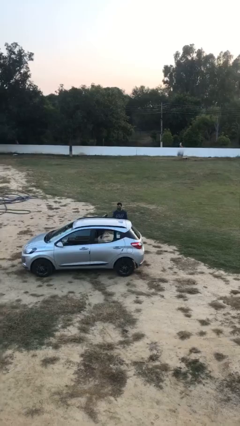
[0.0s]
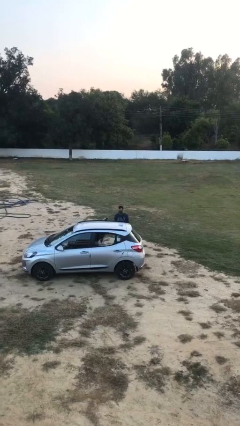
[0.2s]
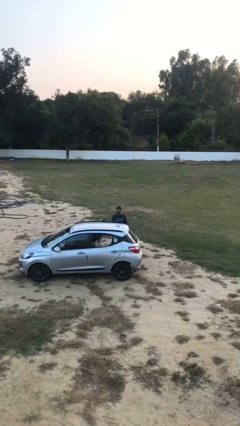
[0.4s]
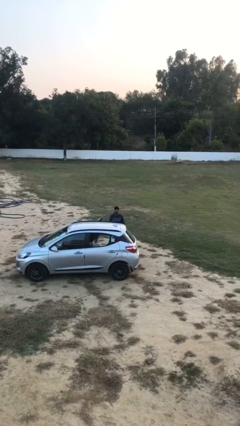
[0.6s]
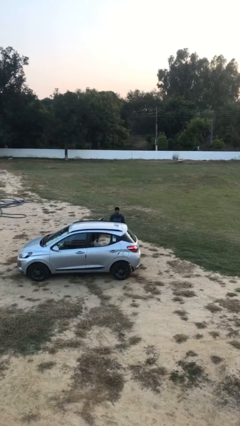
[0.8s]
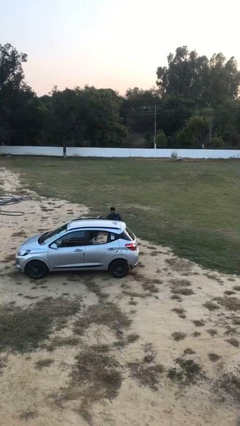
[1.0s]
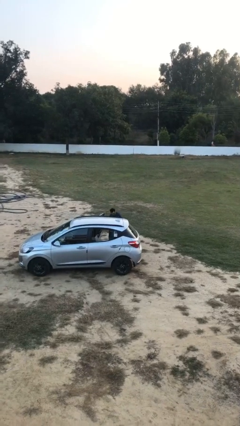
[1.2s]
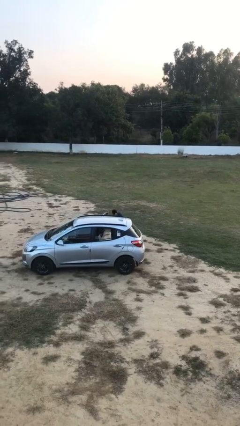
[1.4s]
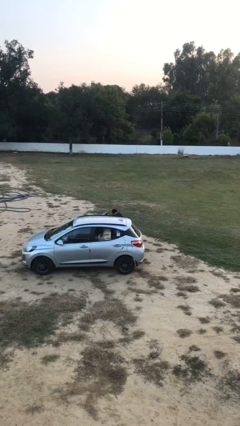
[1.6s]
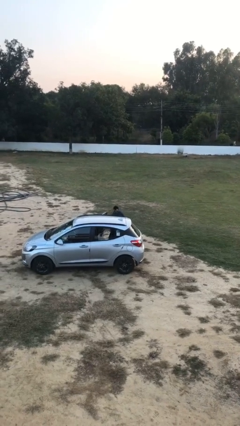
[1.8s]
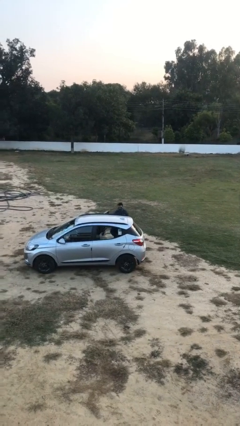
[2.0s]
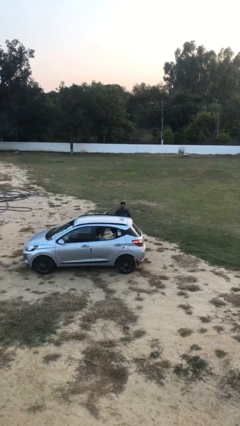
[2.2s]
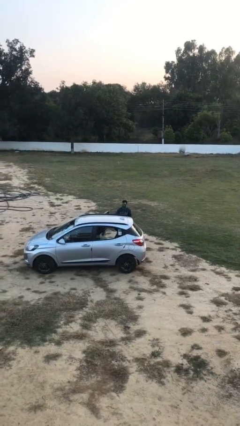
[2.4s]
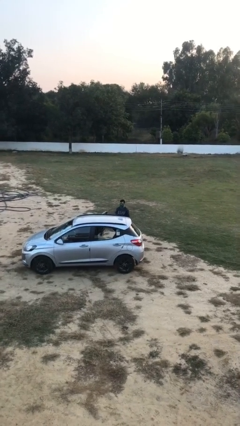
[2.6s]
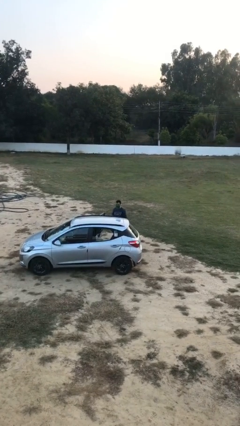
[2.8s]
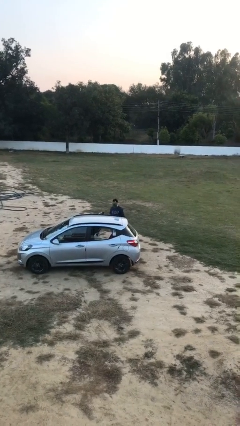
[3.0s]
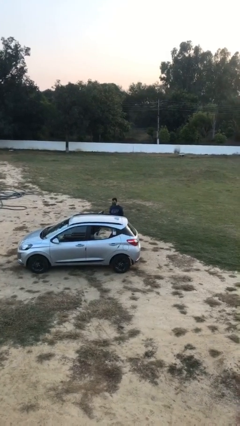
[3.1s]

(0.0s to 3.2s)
person unloads car

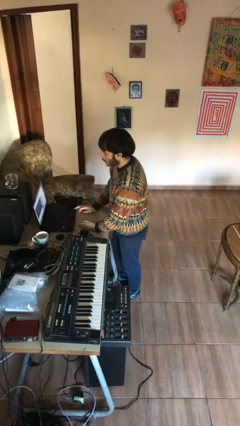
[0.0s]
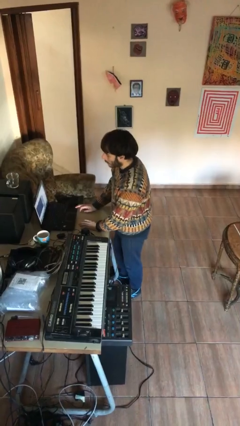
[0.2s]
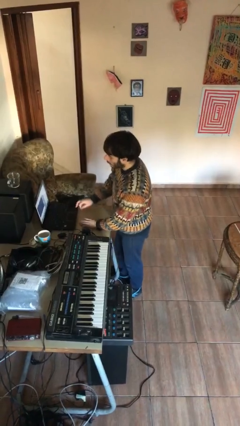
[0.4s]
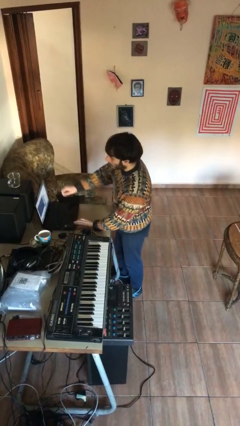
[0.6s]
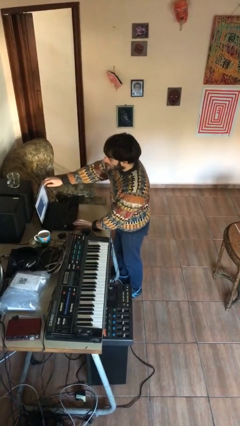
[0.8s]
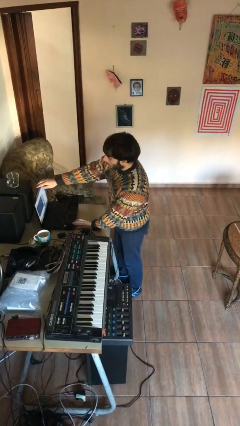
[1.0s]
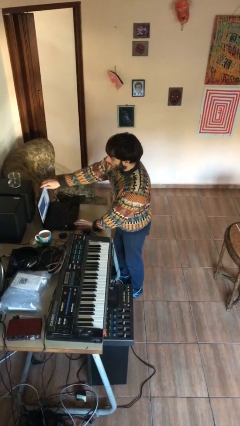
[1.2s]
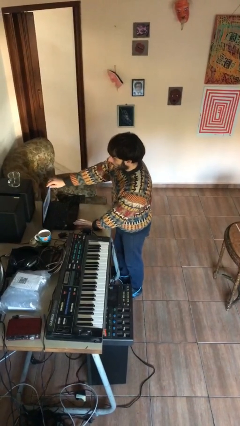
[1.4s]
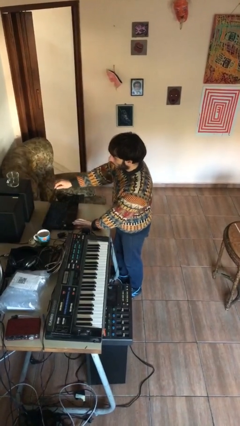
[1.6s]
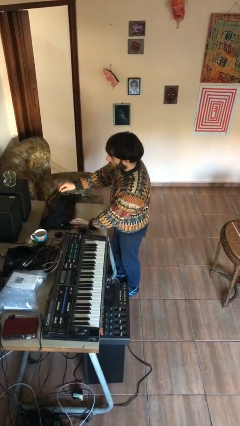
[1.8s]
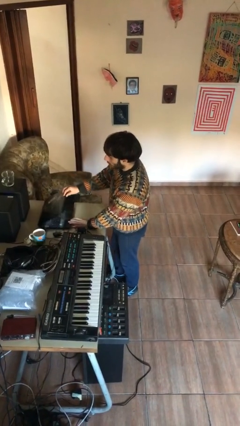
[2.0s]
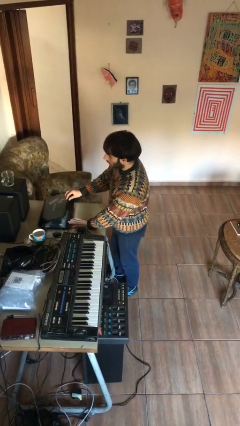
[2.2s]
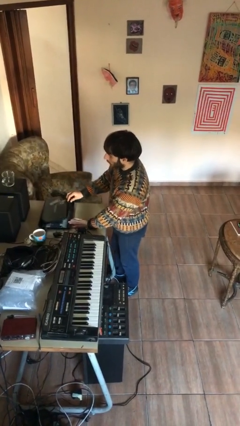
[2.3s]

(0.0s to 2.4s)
person closes laptop

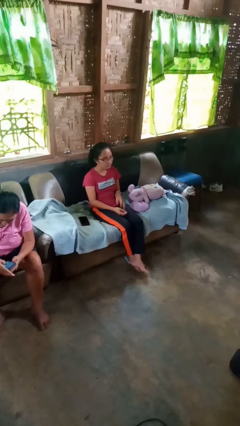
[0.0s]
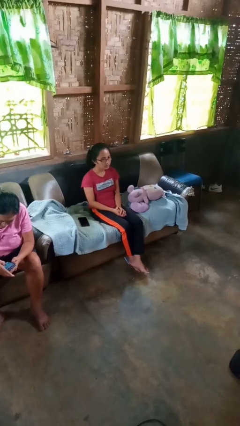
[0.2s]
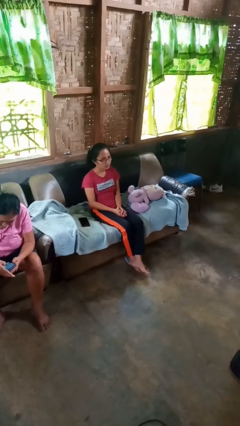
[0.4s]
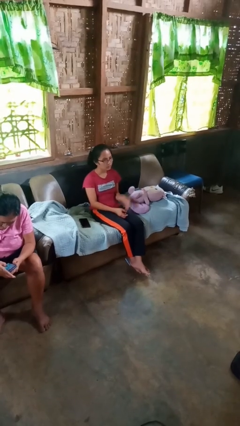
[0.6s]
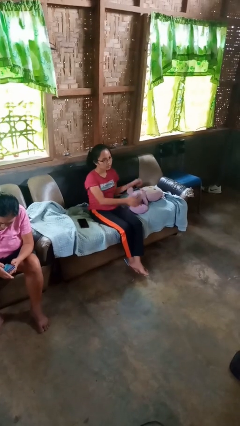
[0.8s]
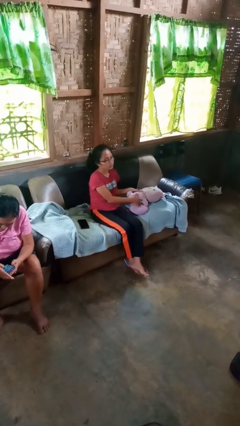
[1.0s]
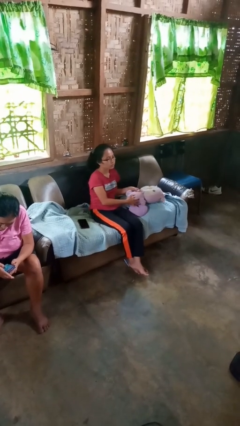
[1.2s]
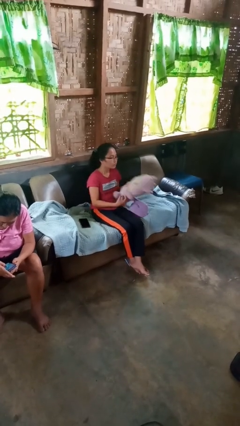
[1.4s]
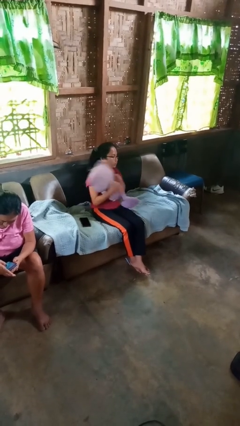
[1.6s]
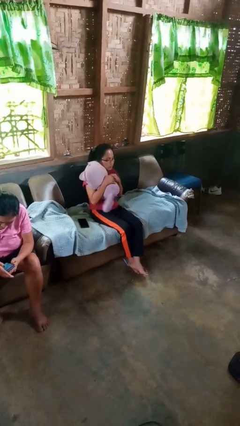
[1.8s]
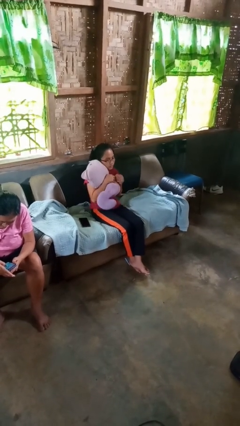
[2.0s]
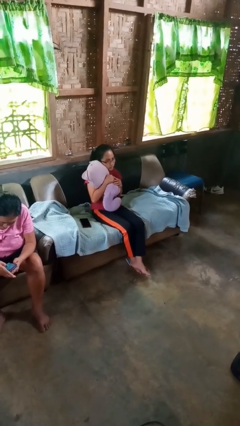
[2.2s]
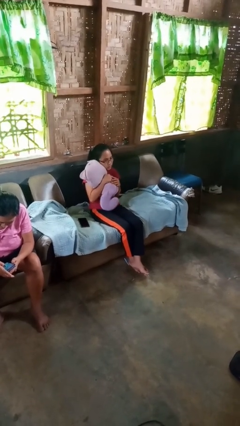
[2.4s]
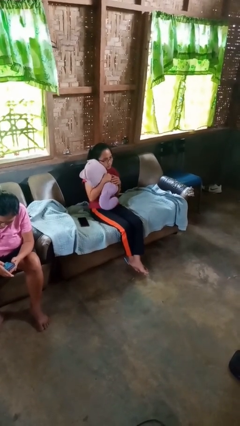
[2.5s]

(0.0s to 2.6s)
person hugs stuffed animal

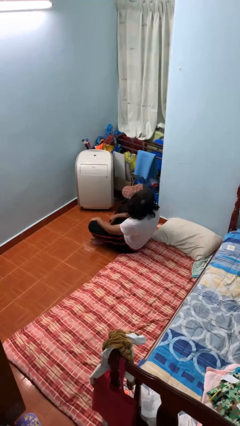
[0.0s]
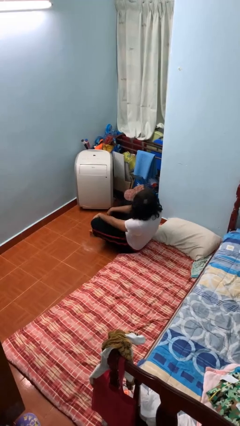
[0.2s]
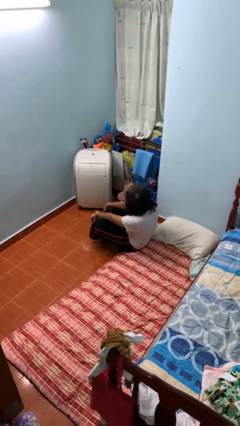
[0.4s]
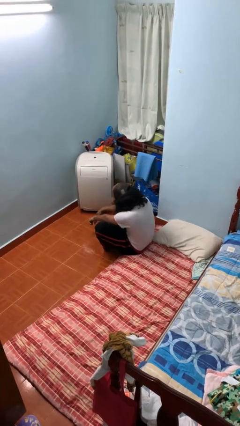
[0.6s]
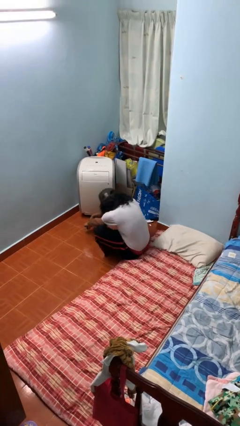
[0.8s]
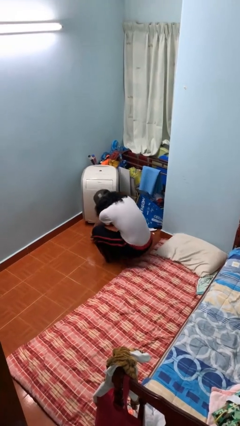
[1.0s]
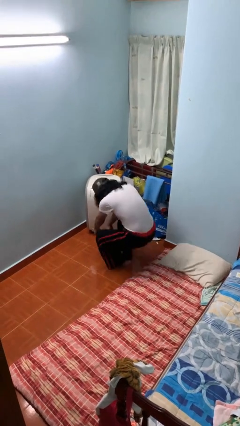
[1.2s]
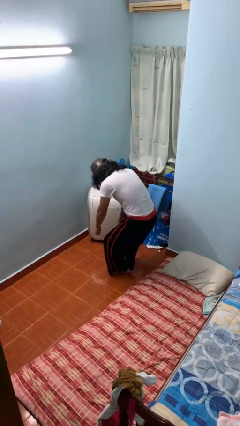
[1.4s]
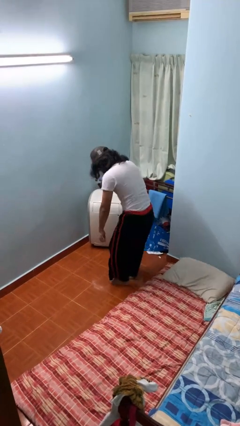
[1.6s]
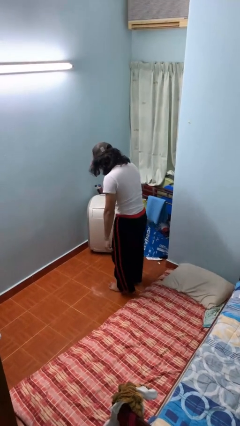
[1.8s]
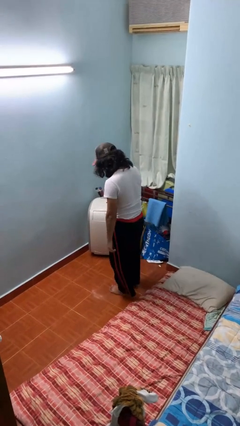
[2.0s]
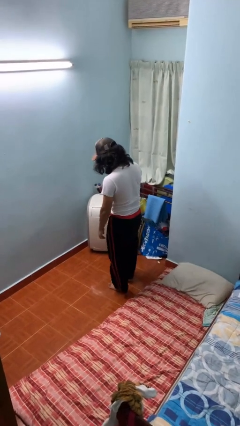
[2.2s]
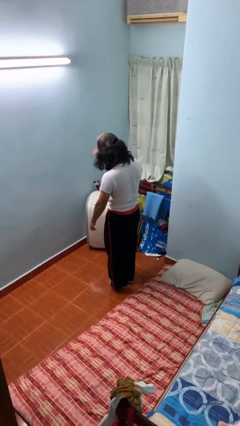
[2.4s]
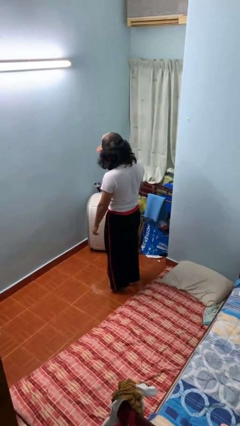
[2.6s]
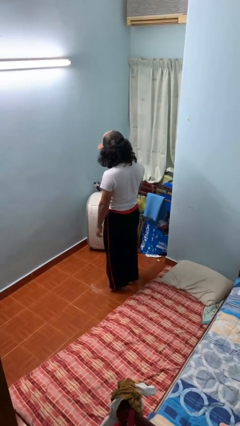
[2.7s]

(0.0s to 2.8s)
person stands up from floor

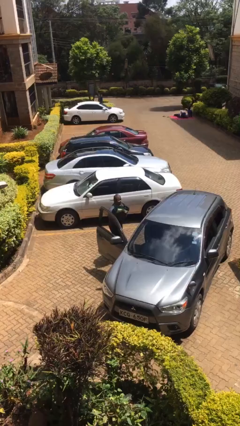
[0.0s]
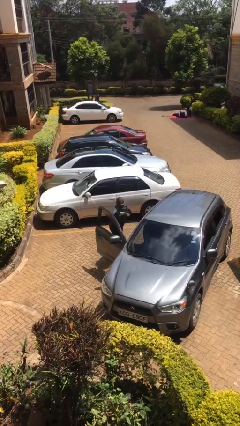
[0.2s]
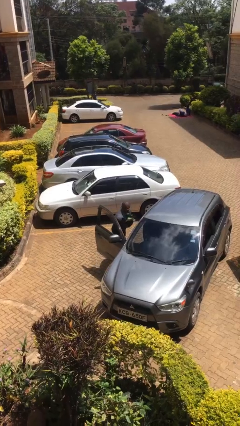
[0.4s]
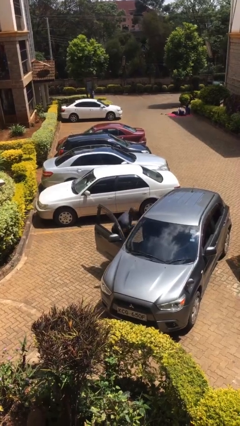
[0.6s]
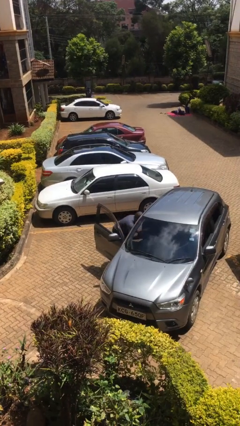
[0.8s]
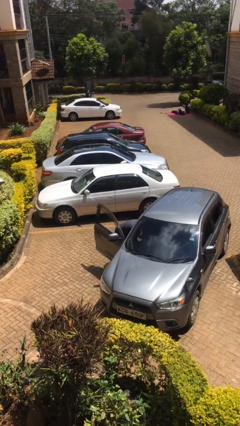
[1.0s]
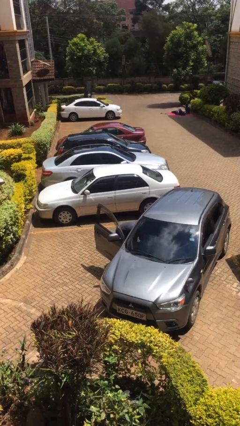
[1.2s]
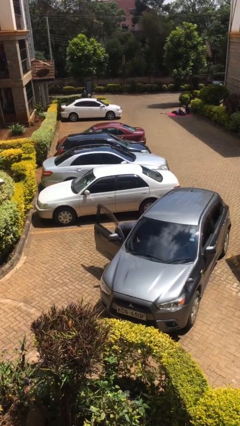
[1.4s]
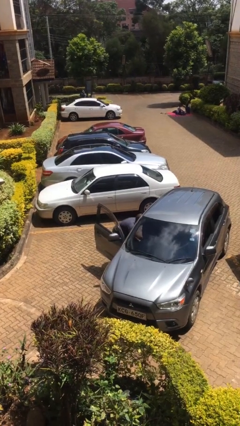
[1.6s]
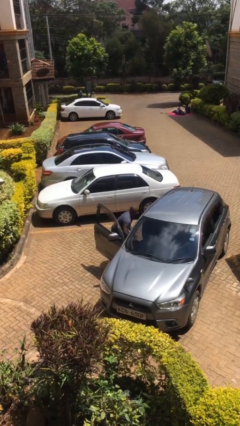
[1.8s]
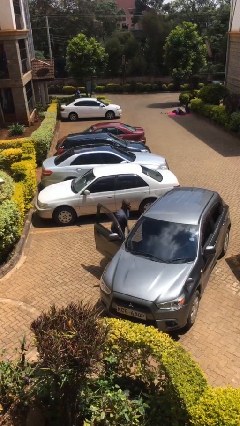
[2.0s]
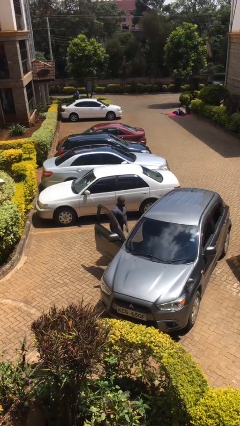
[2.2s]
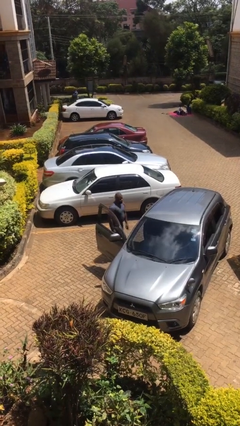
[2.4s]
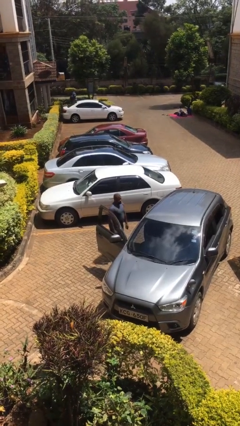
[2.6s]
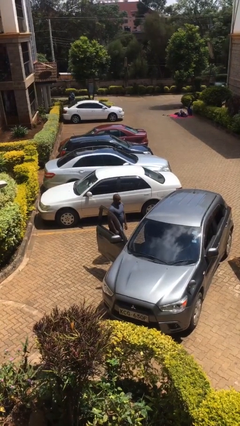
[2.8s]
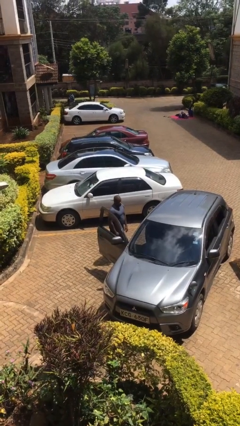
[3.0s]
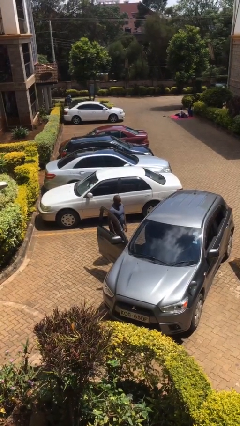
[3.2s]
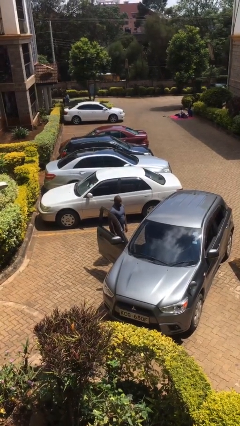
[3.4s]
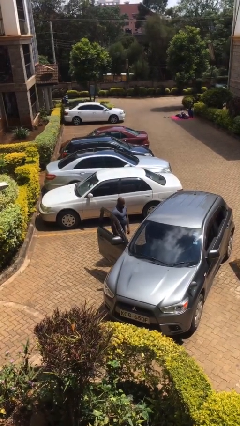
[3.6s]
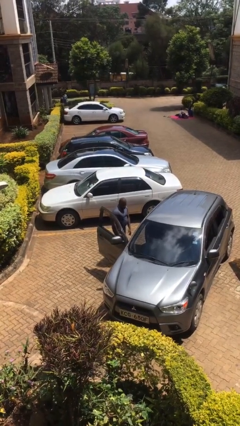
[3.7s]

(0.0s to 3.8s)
person loads car

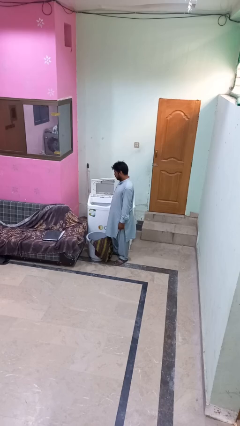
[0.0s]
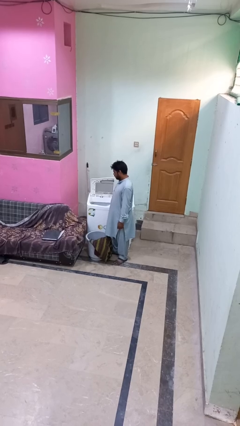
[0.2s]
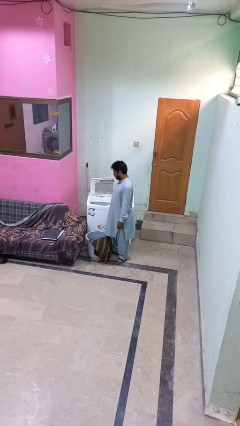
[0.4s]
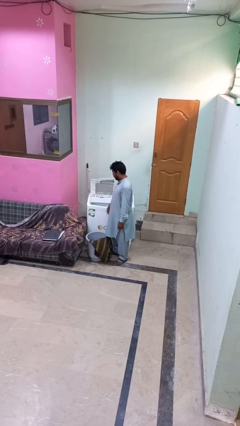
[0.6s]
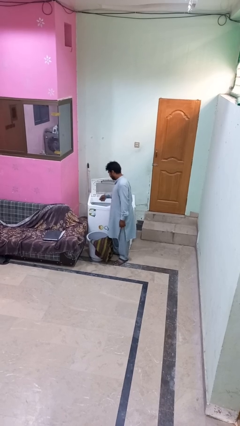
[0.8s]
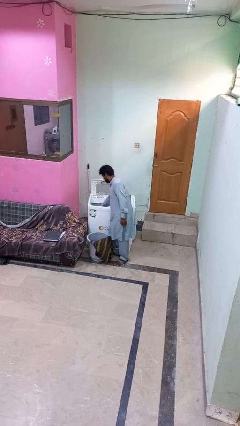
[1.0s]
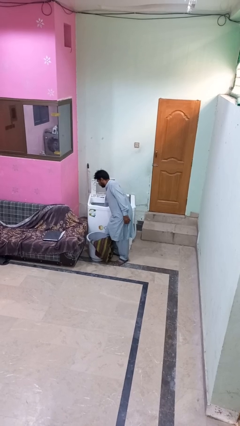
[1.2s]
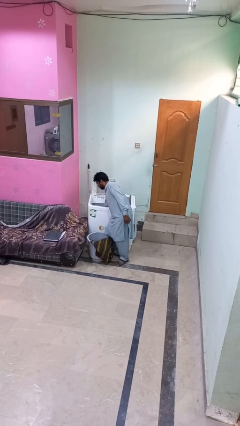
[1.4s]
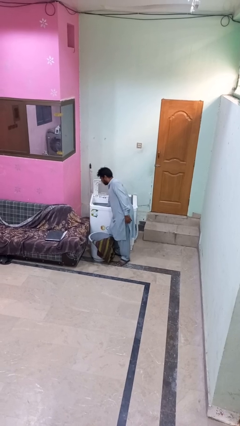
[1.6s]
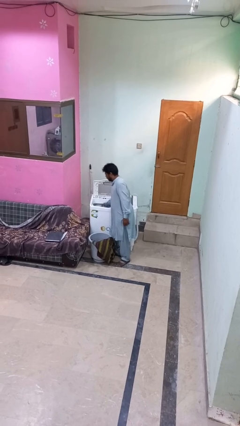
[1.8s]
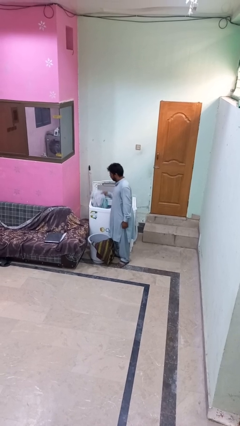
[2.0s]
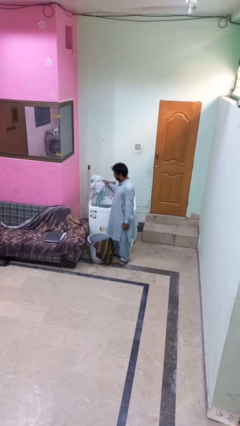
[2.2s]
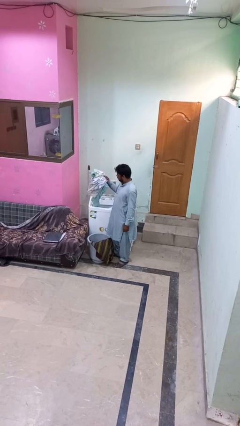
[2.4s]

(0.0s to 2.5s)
person unloads clotheswasher

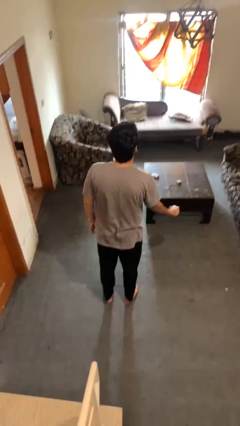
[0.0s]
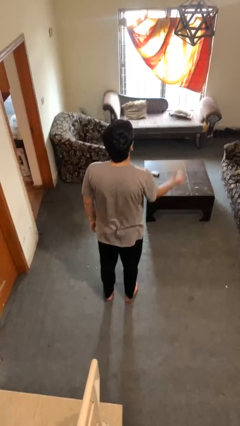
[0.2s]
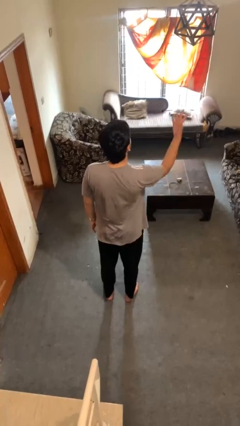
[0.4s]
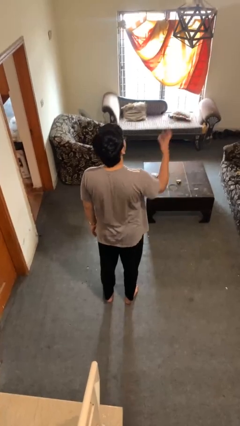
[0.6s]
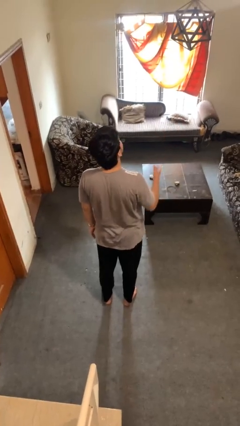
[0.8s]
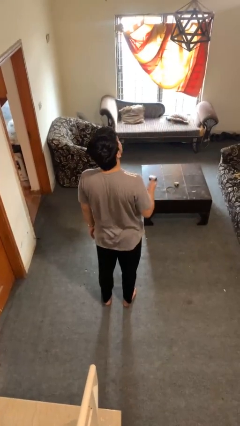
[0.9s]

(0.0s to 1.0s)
person drops object
